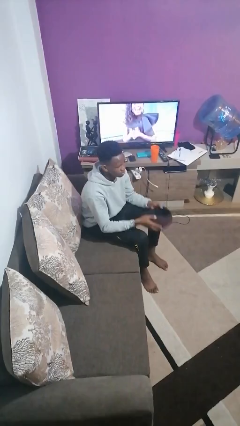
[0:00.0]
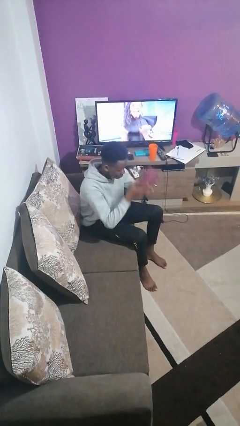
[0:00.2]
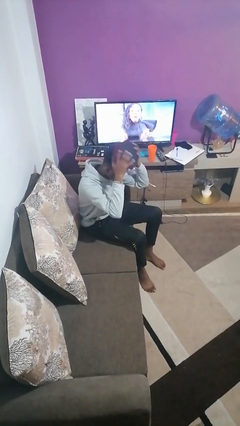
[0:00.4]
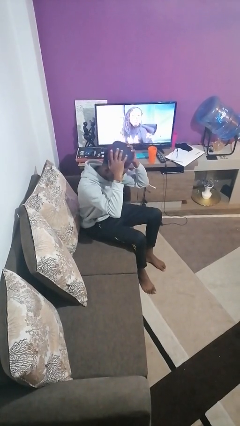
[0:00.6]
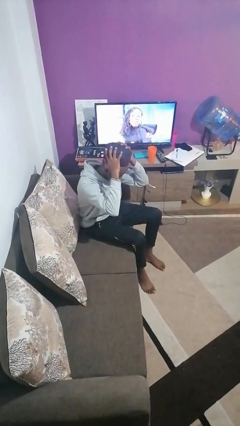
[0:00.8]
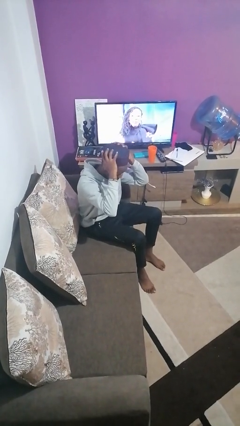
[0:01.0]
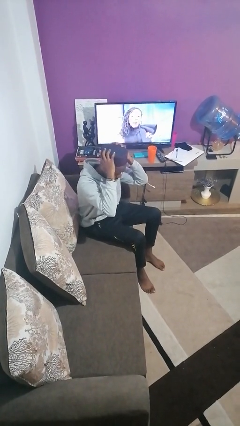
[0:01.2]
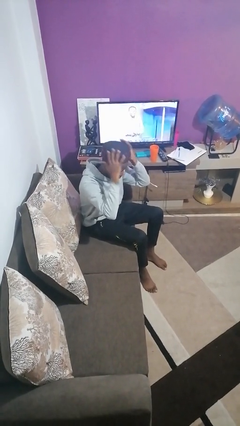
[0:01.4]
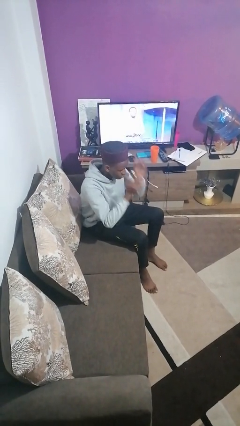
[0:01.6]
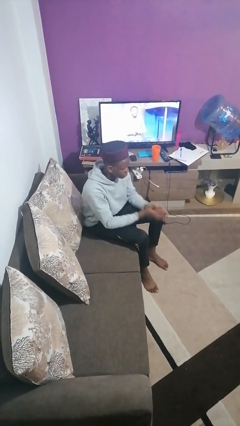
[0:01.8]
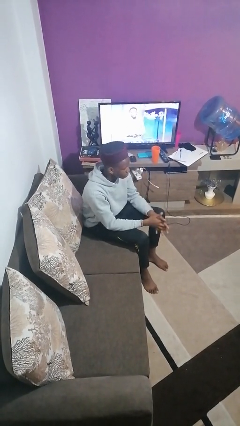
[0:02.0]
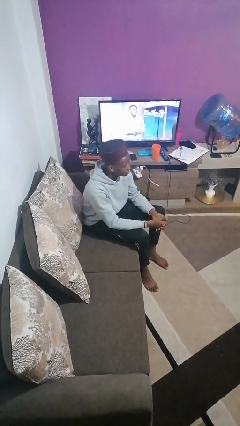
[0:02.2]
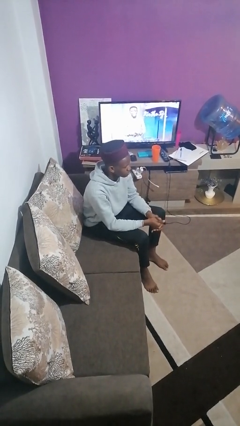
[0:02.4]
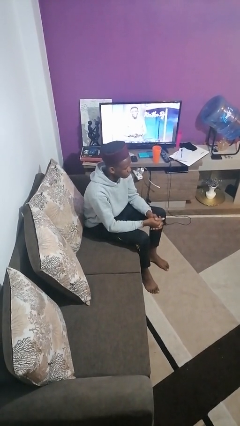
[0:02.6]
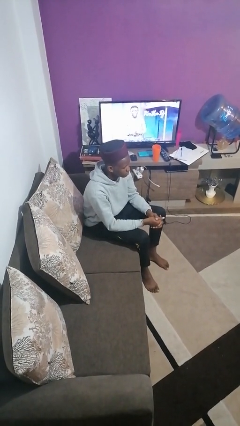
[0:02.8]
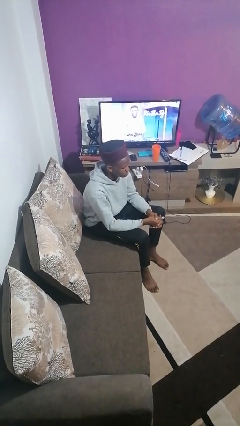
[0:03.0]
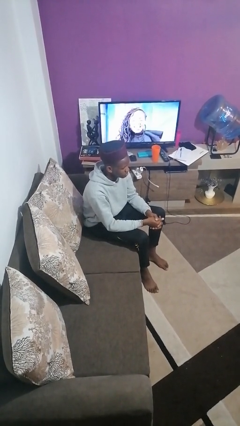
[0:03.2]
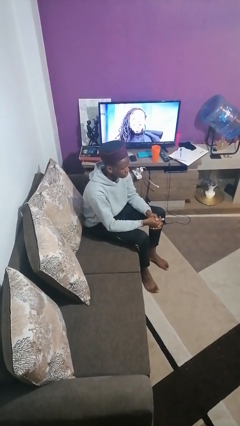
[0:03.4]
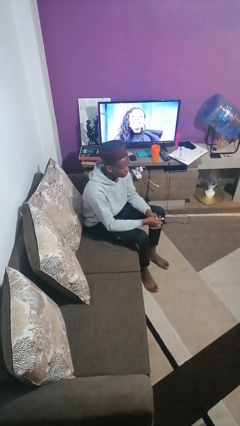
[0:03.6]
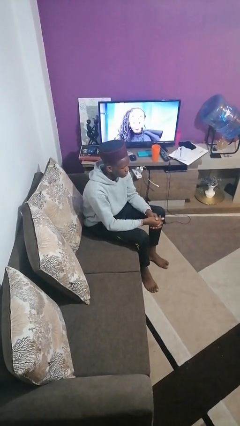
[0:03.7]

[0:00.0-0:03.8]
person puts on hat

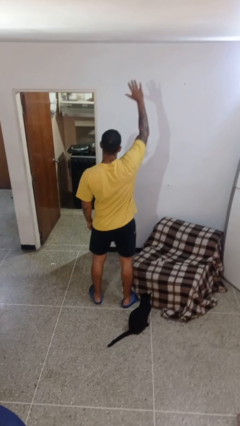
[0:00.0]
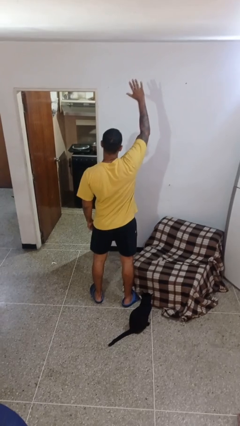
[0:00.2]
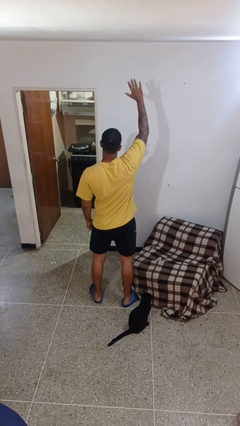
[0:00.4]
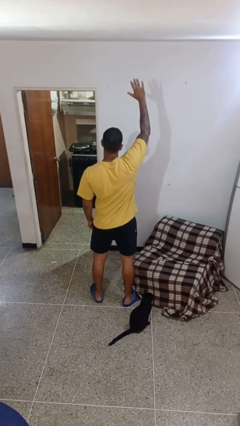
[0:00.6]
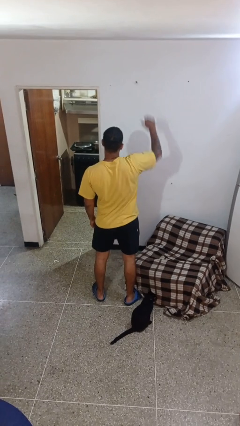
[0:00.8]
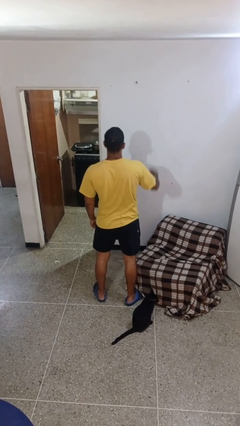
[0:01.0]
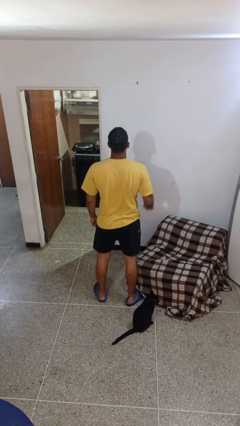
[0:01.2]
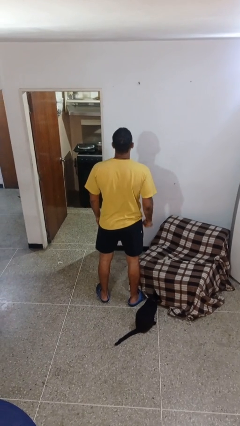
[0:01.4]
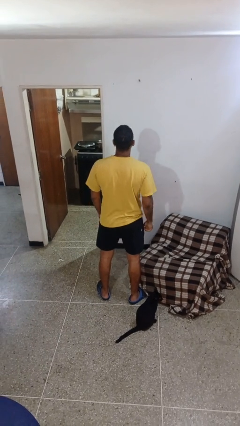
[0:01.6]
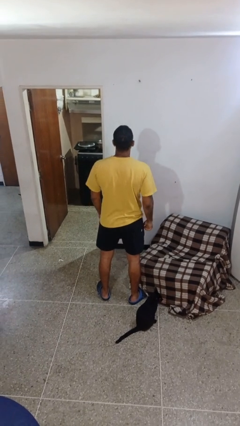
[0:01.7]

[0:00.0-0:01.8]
person gestures lower hand

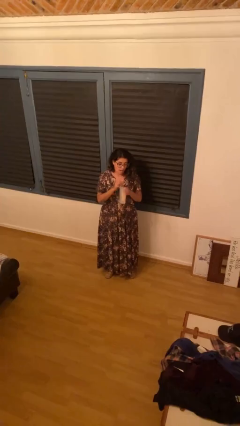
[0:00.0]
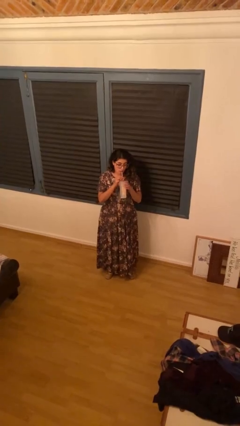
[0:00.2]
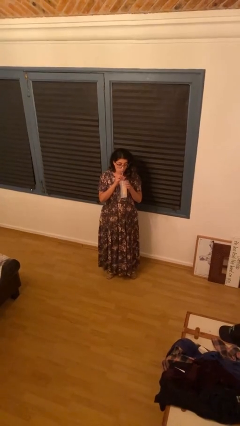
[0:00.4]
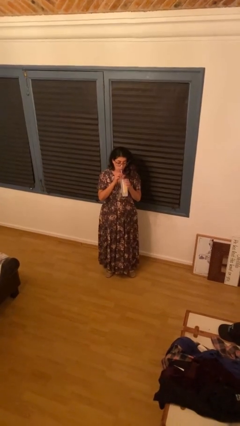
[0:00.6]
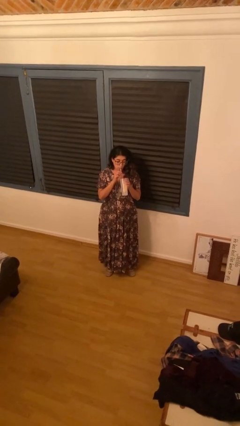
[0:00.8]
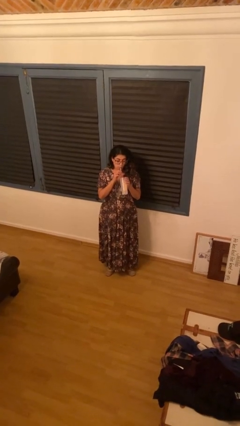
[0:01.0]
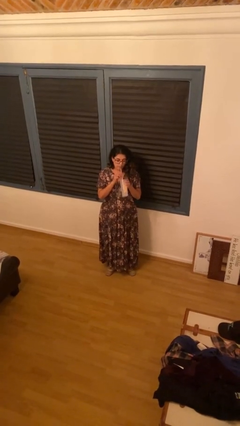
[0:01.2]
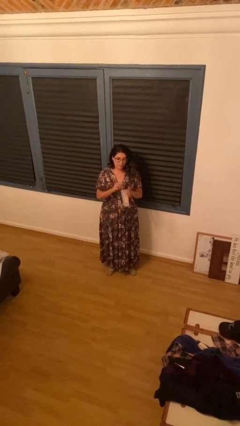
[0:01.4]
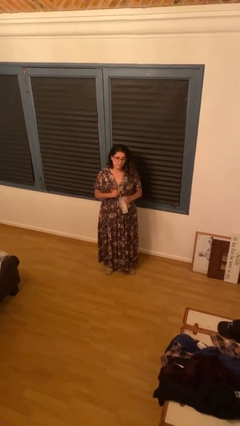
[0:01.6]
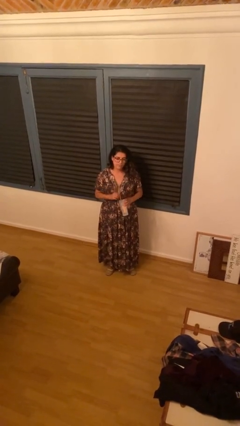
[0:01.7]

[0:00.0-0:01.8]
person drinks from straw

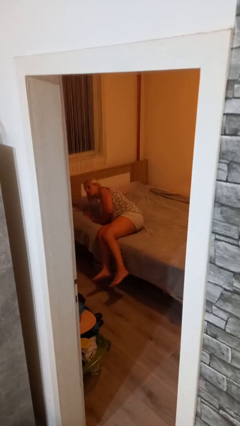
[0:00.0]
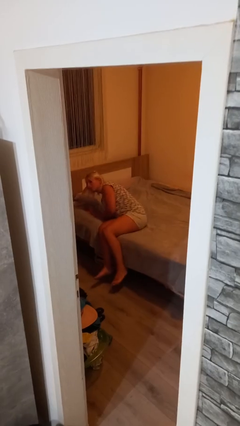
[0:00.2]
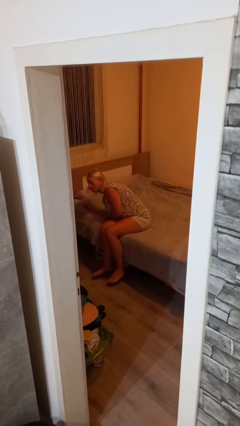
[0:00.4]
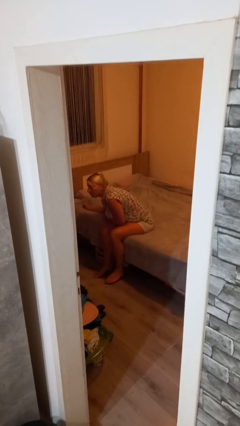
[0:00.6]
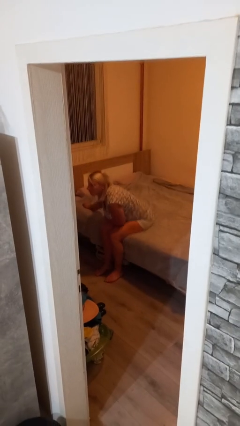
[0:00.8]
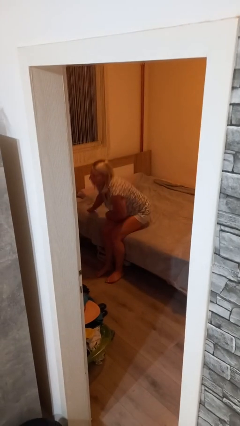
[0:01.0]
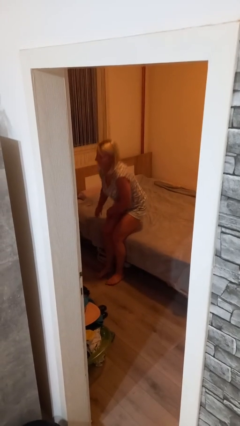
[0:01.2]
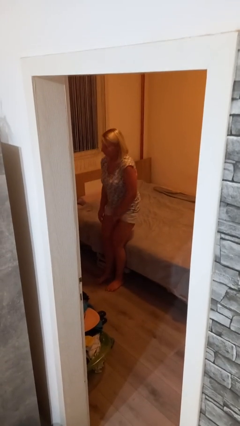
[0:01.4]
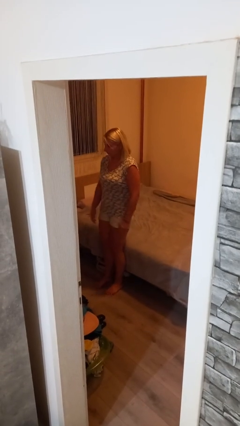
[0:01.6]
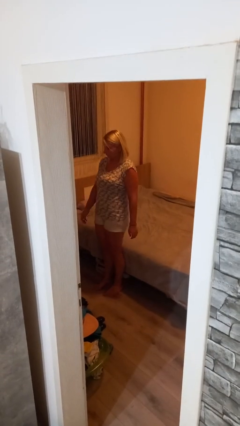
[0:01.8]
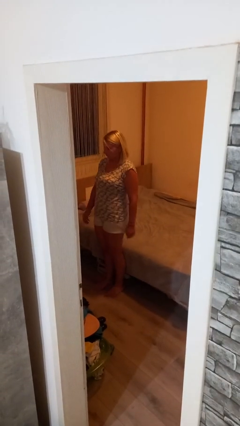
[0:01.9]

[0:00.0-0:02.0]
person stands up

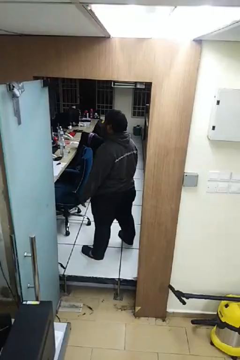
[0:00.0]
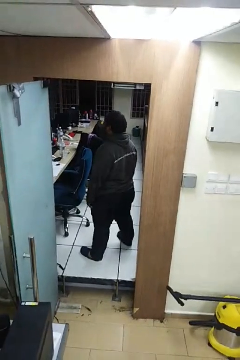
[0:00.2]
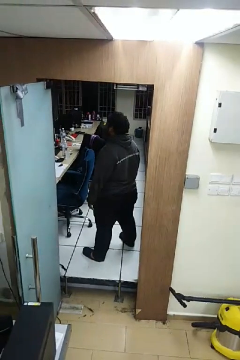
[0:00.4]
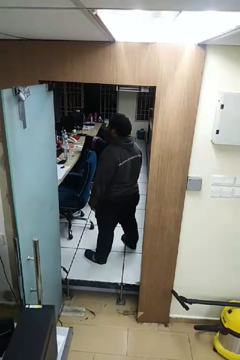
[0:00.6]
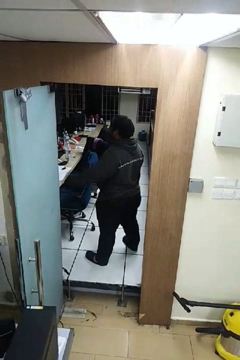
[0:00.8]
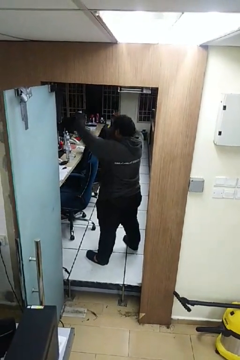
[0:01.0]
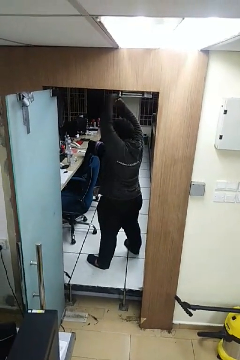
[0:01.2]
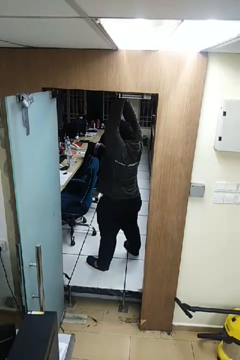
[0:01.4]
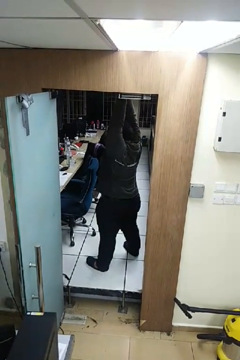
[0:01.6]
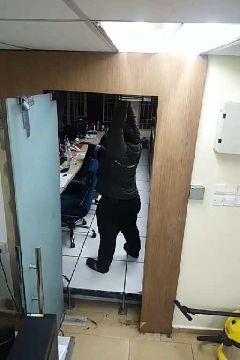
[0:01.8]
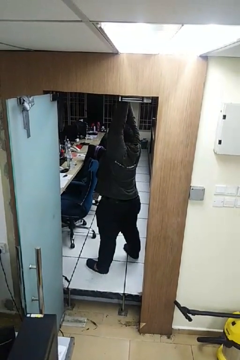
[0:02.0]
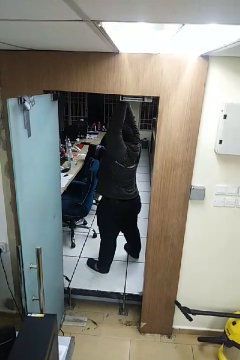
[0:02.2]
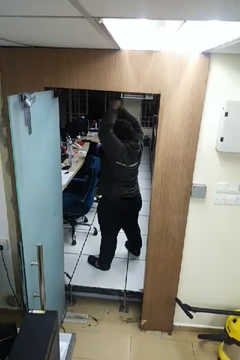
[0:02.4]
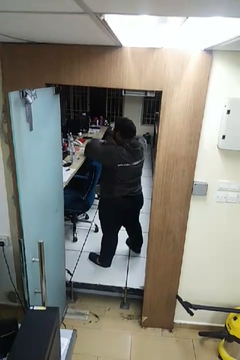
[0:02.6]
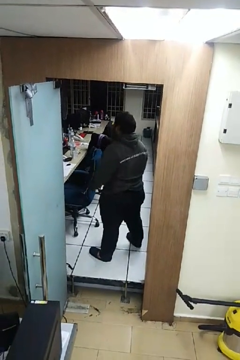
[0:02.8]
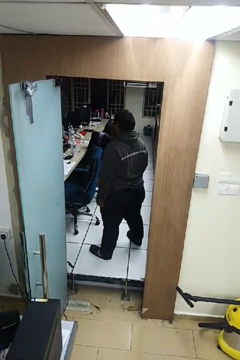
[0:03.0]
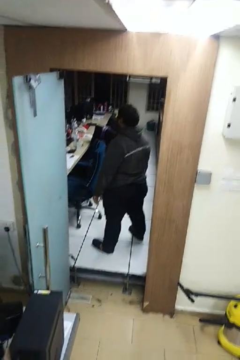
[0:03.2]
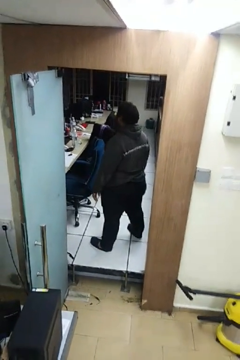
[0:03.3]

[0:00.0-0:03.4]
person stretches arms over head

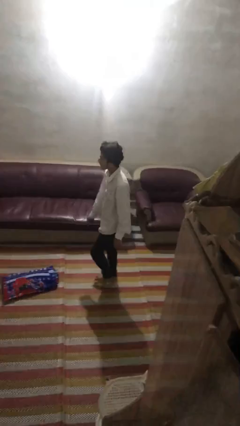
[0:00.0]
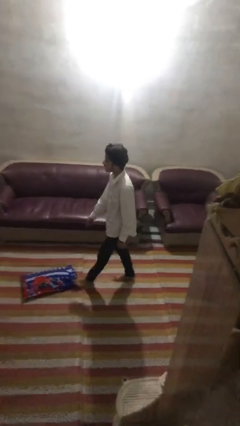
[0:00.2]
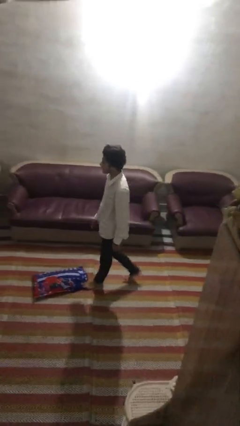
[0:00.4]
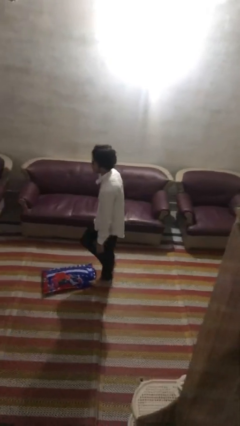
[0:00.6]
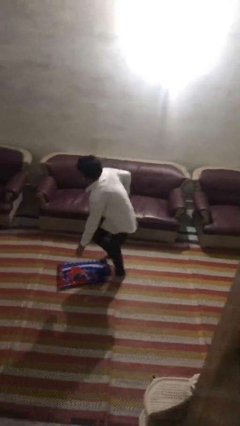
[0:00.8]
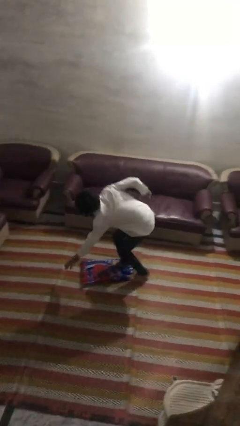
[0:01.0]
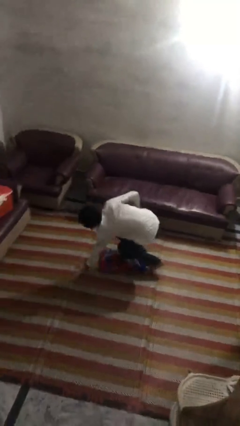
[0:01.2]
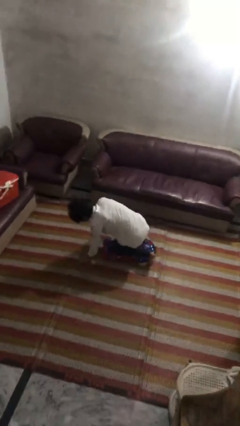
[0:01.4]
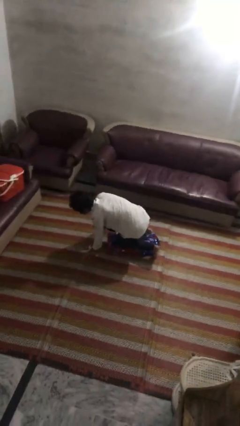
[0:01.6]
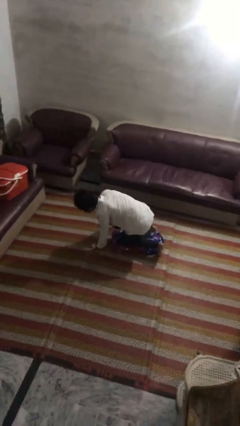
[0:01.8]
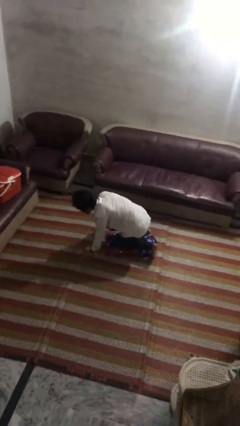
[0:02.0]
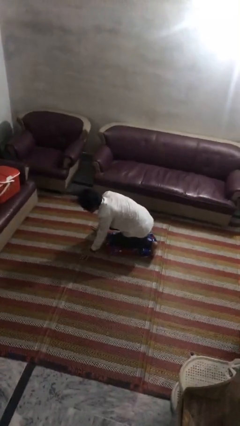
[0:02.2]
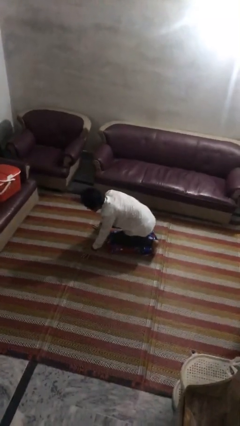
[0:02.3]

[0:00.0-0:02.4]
person trips on object on floor

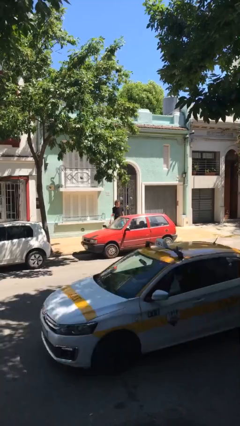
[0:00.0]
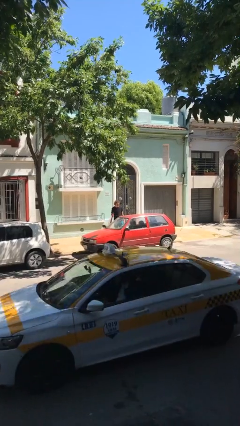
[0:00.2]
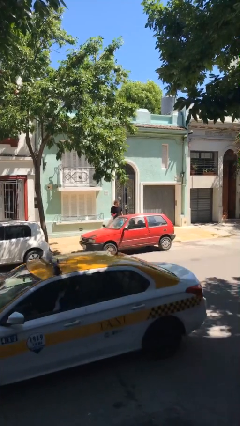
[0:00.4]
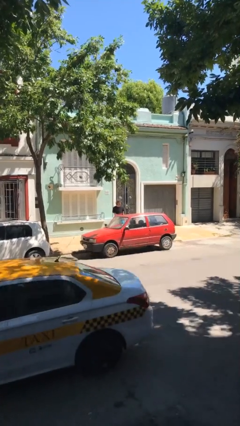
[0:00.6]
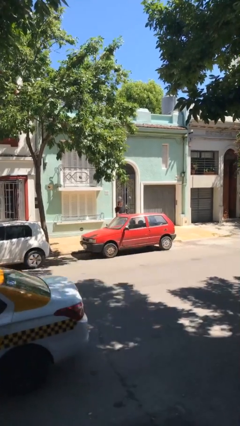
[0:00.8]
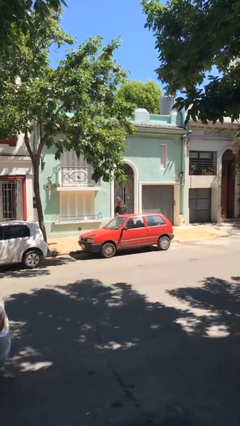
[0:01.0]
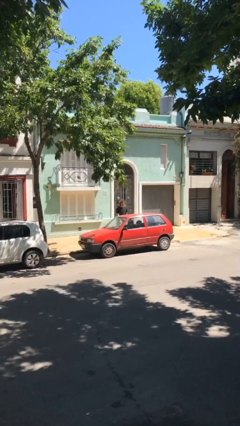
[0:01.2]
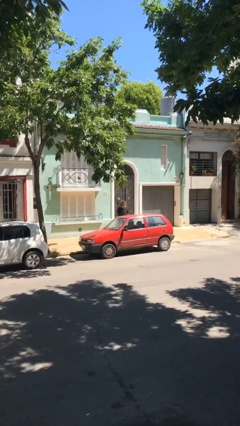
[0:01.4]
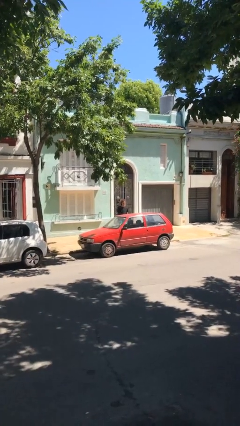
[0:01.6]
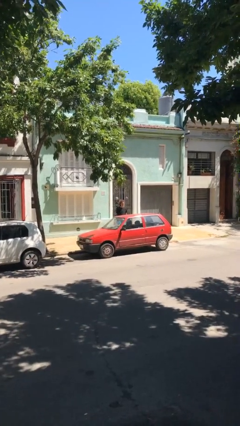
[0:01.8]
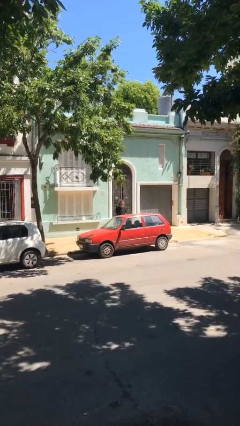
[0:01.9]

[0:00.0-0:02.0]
person closes car door

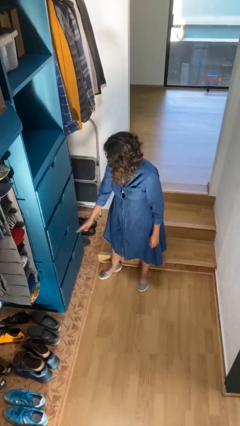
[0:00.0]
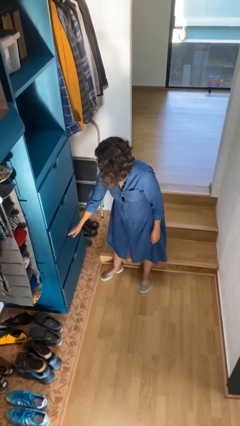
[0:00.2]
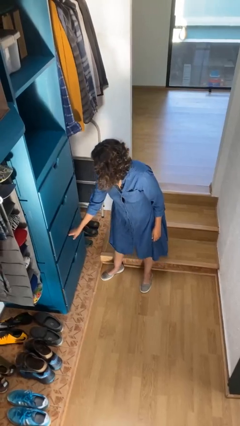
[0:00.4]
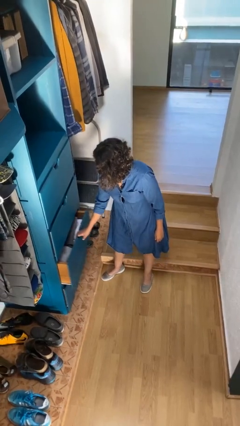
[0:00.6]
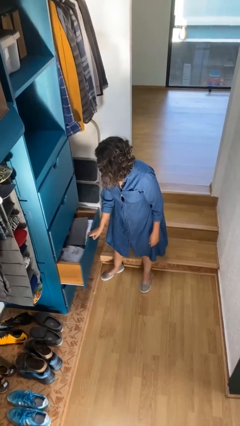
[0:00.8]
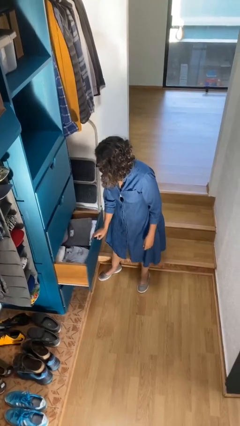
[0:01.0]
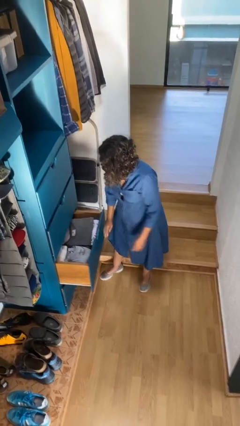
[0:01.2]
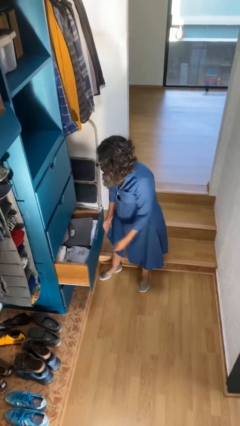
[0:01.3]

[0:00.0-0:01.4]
person opens dresser drawer
